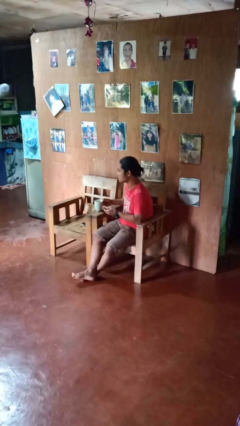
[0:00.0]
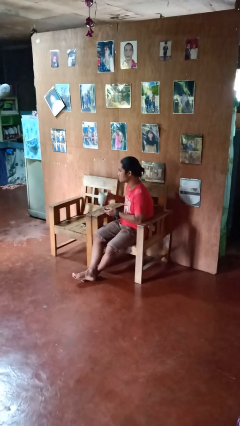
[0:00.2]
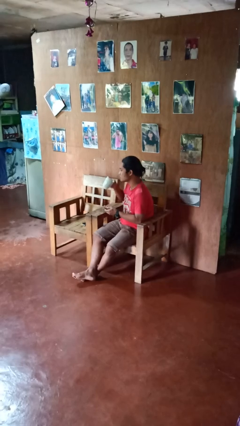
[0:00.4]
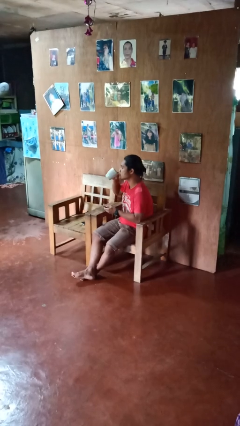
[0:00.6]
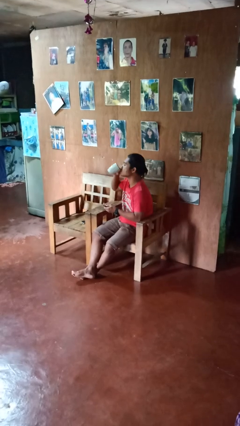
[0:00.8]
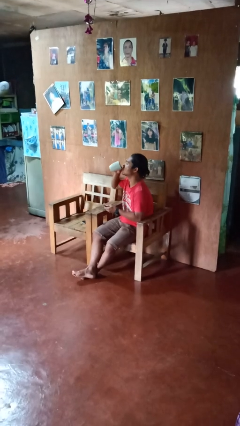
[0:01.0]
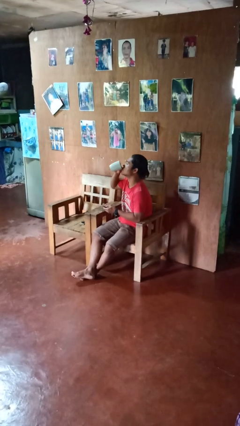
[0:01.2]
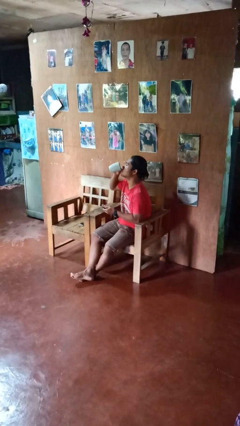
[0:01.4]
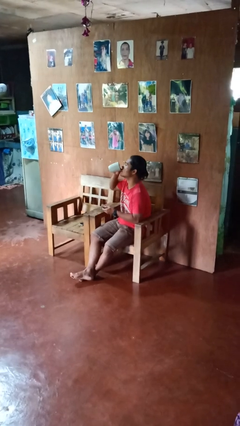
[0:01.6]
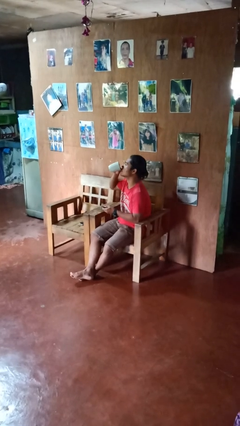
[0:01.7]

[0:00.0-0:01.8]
person drinks from cup

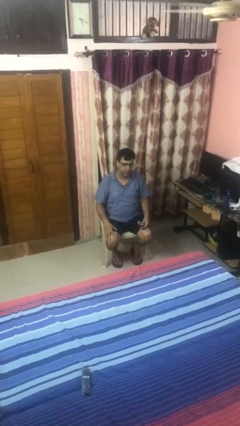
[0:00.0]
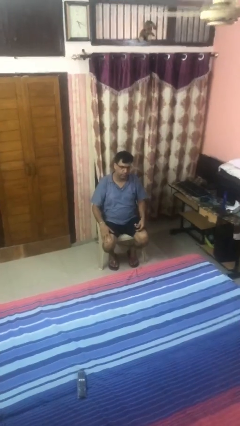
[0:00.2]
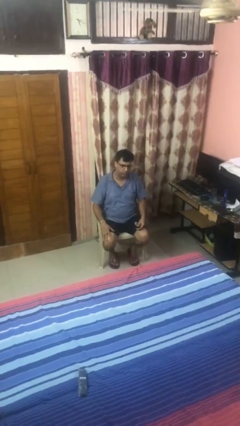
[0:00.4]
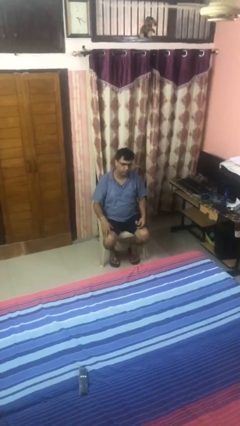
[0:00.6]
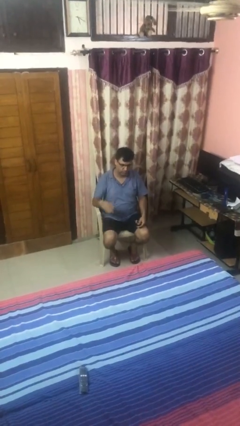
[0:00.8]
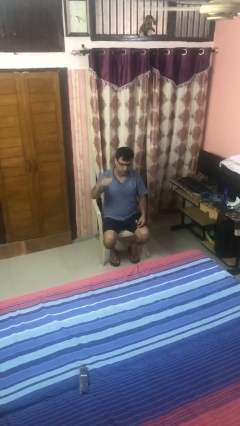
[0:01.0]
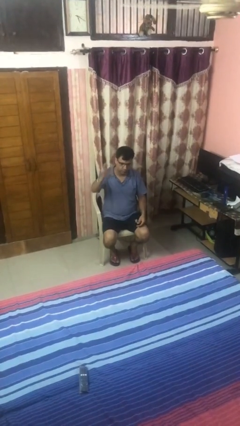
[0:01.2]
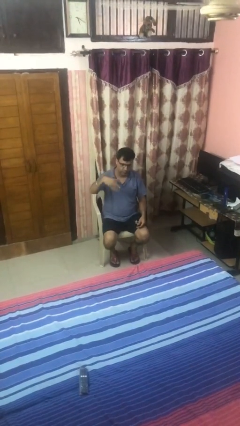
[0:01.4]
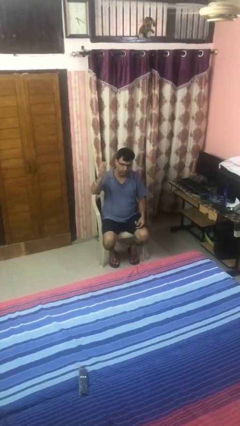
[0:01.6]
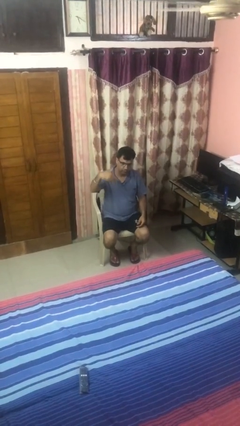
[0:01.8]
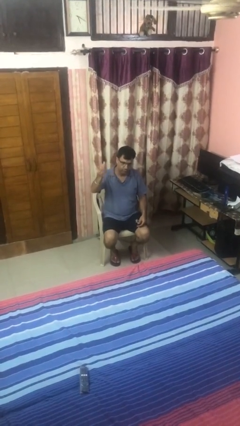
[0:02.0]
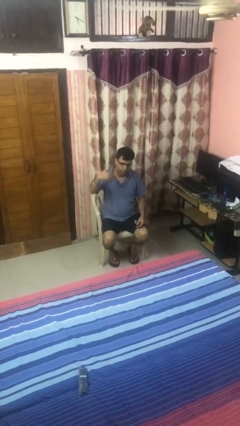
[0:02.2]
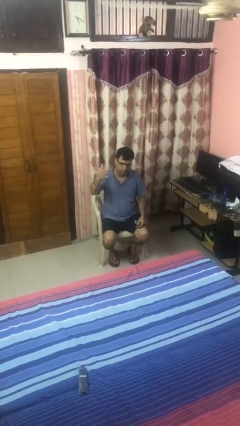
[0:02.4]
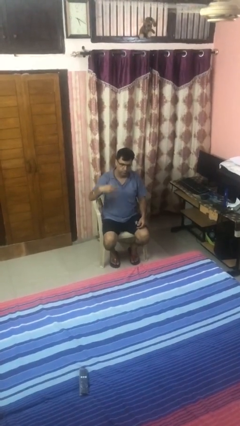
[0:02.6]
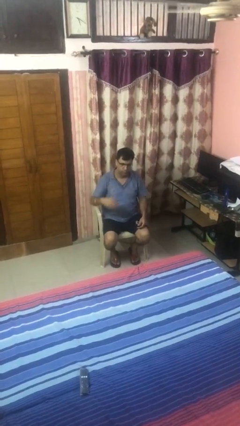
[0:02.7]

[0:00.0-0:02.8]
person gestures come here

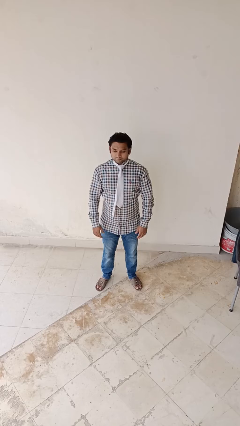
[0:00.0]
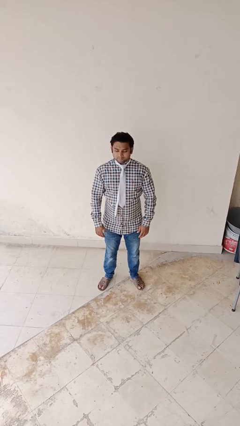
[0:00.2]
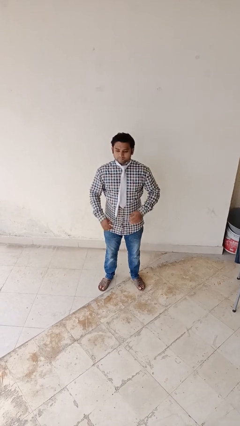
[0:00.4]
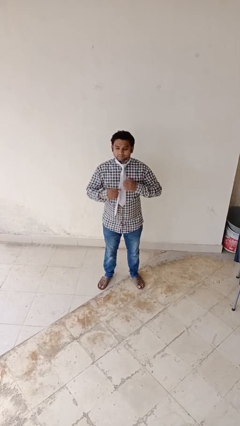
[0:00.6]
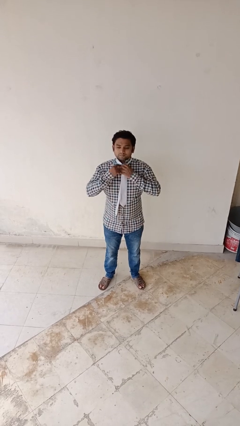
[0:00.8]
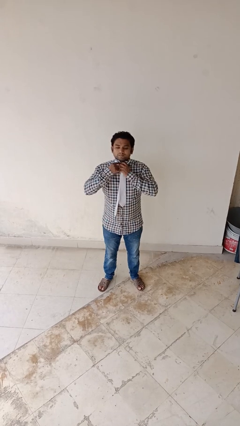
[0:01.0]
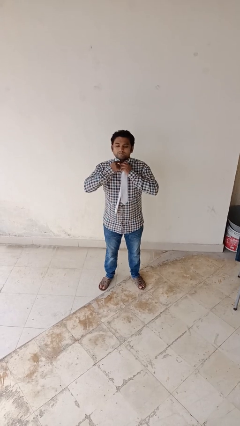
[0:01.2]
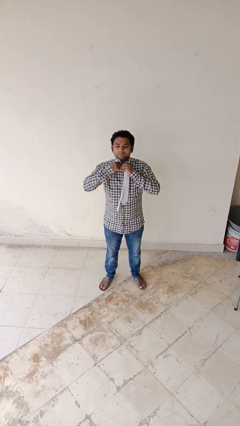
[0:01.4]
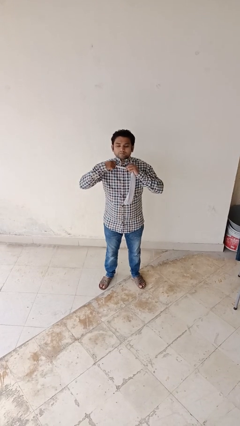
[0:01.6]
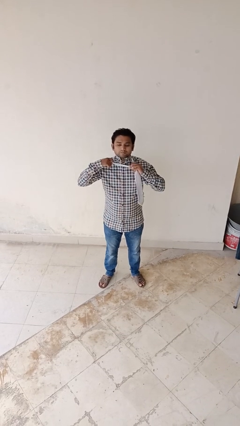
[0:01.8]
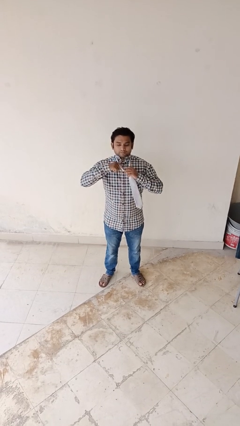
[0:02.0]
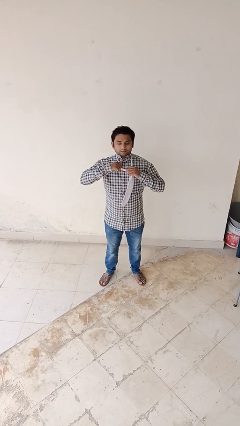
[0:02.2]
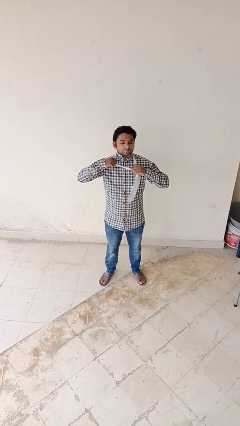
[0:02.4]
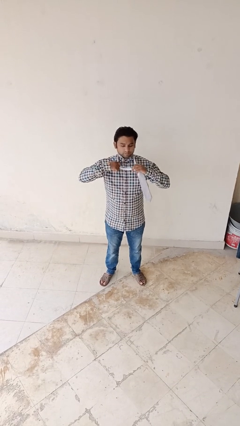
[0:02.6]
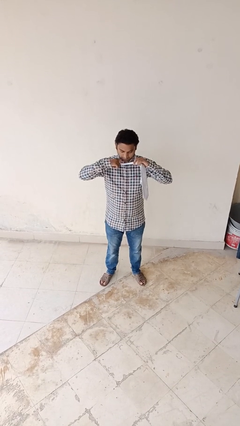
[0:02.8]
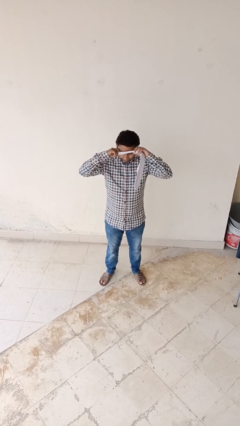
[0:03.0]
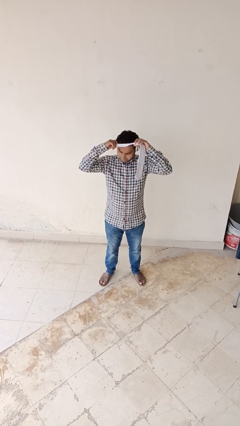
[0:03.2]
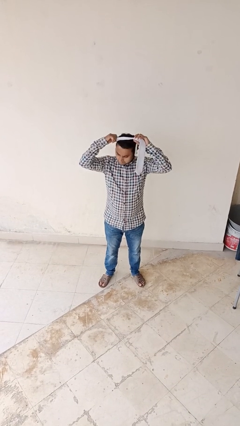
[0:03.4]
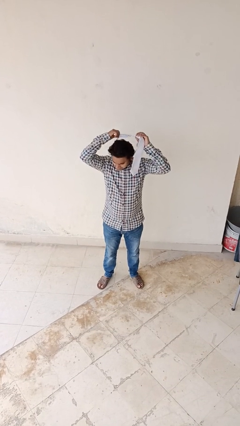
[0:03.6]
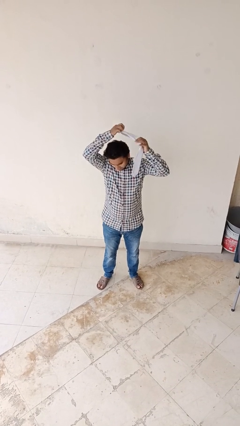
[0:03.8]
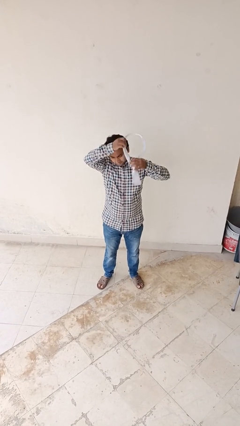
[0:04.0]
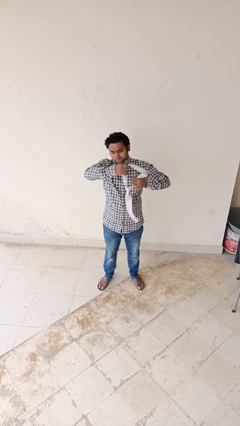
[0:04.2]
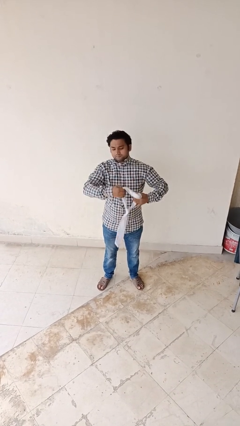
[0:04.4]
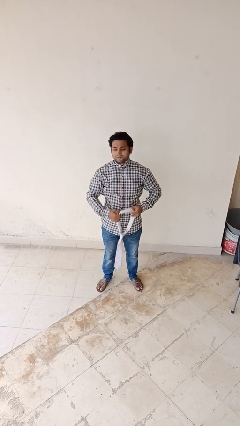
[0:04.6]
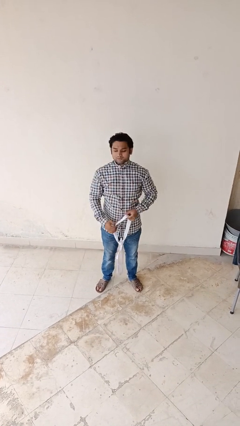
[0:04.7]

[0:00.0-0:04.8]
person takes off necktie

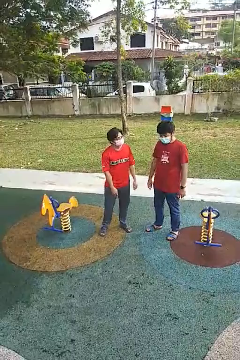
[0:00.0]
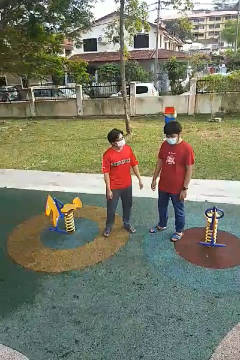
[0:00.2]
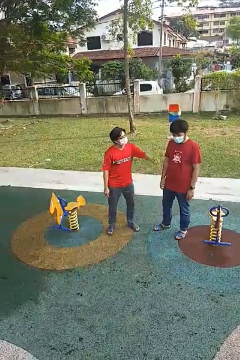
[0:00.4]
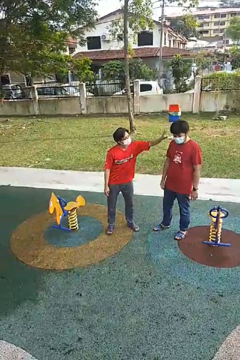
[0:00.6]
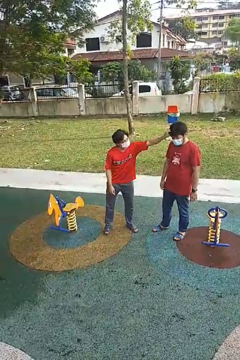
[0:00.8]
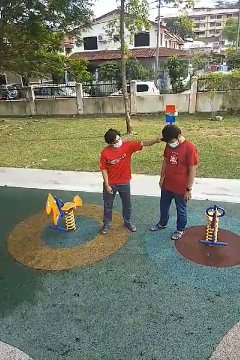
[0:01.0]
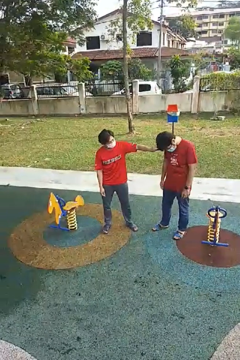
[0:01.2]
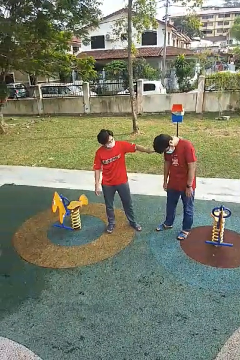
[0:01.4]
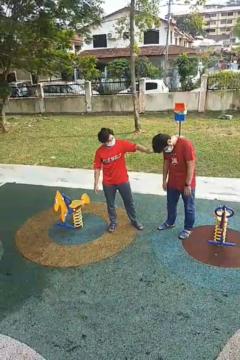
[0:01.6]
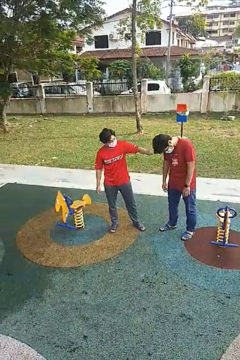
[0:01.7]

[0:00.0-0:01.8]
person grabs person by hair

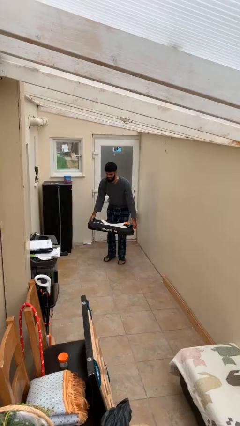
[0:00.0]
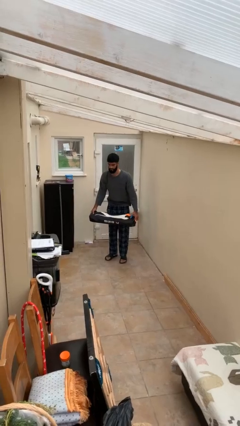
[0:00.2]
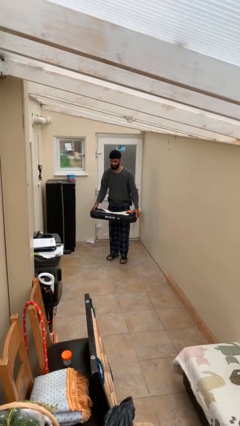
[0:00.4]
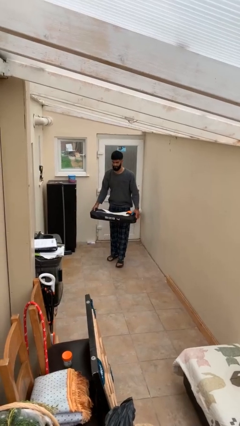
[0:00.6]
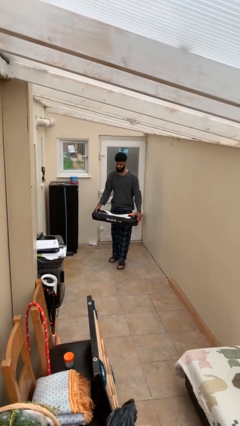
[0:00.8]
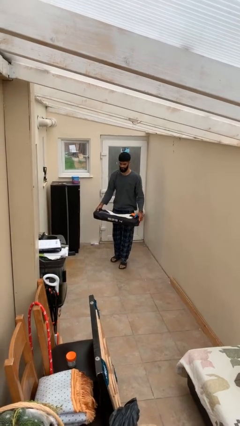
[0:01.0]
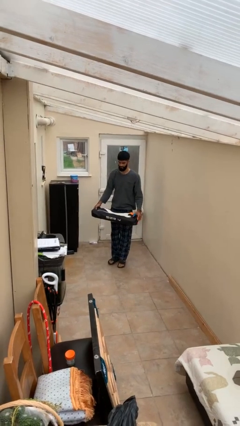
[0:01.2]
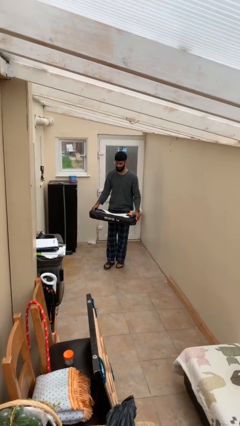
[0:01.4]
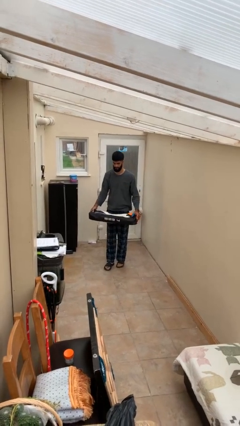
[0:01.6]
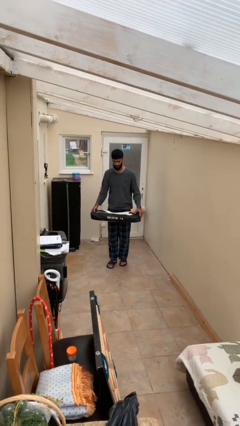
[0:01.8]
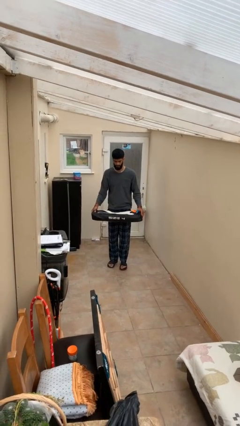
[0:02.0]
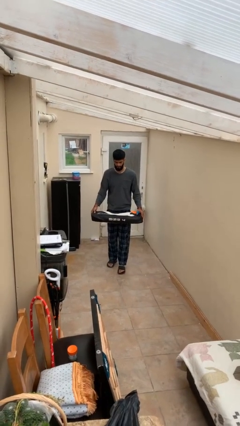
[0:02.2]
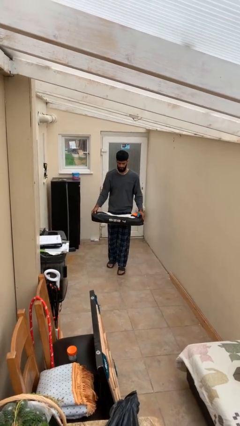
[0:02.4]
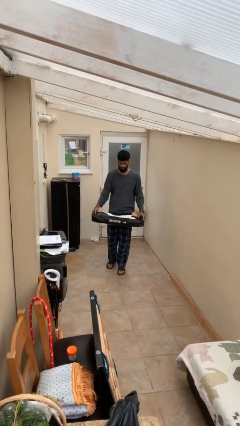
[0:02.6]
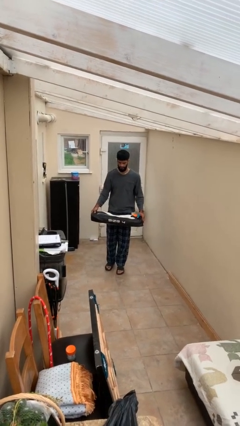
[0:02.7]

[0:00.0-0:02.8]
person carries heavy object

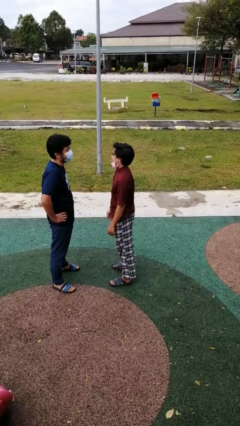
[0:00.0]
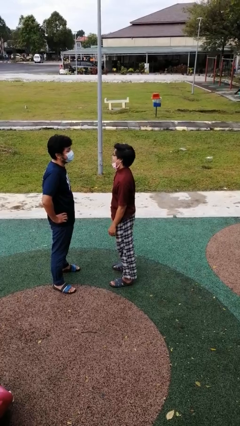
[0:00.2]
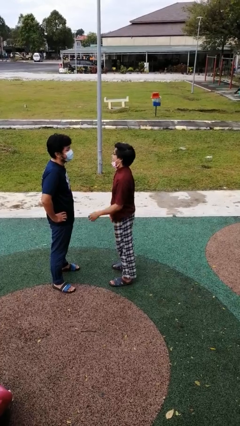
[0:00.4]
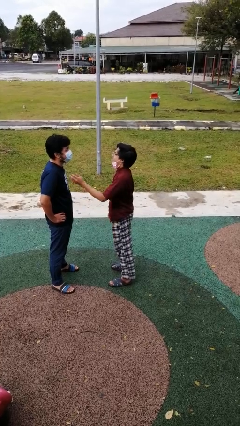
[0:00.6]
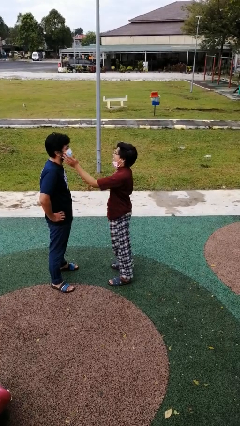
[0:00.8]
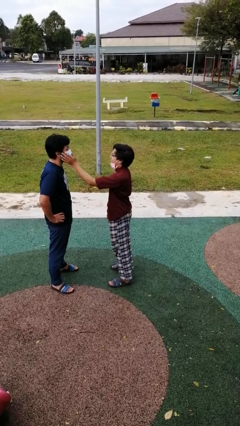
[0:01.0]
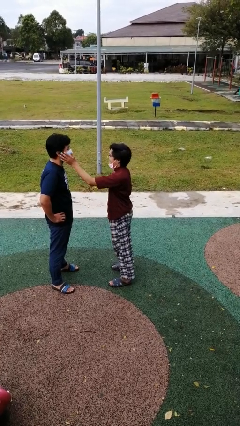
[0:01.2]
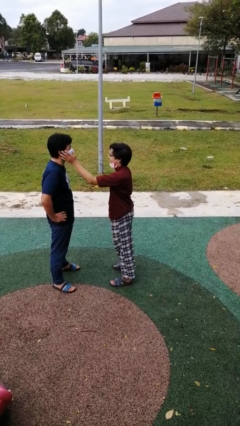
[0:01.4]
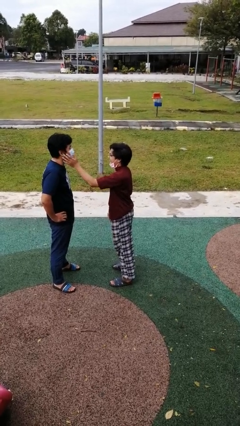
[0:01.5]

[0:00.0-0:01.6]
person touches face of person

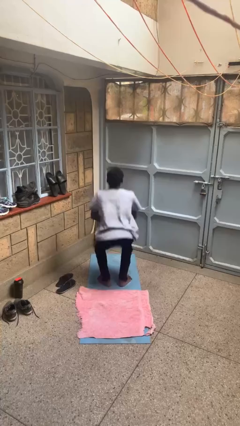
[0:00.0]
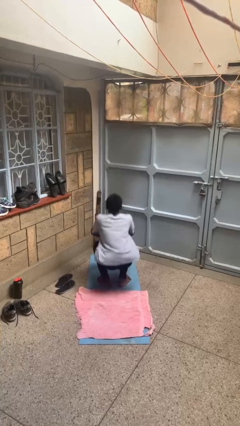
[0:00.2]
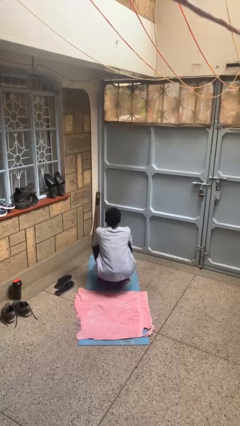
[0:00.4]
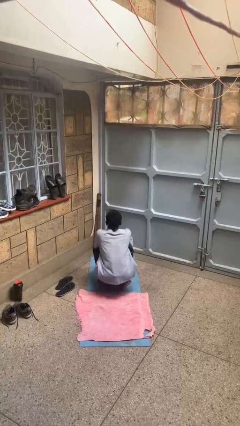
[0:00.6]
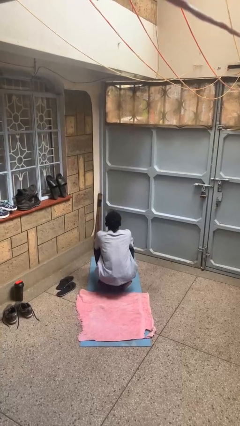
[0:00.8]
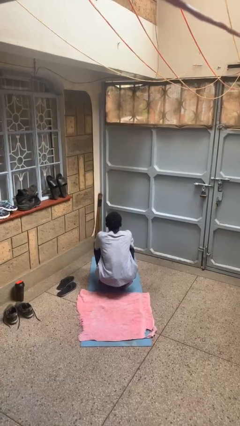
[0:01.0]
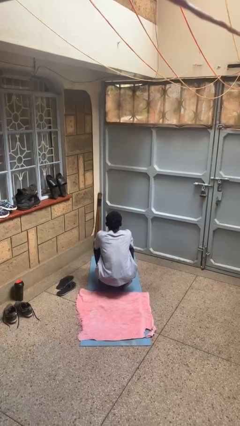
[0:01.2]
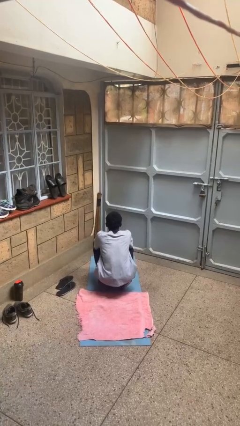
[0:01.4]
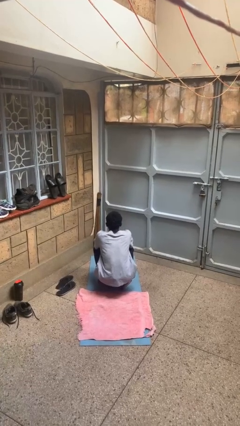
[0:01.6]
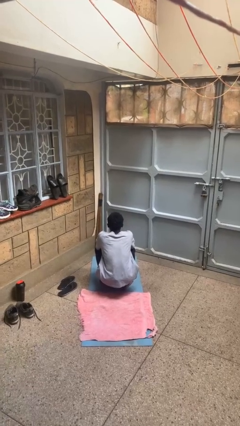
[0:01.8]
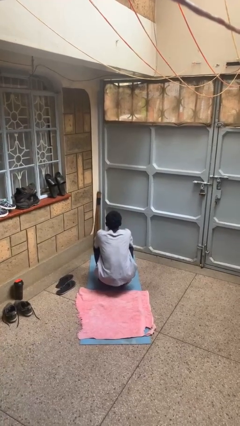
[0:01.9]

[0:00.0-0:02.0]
person squats
